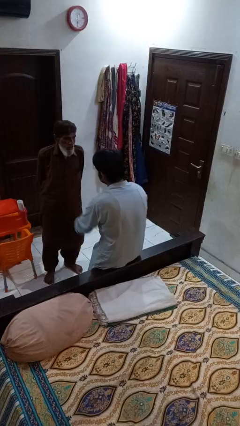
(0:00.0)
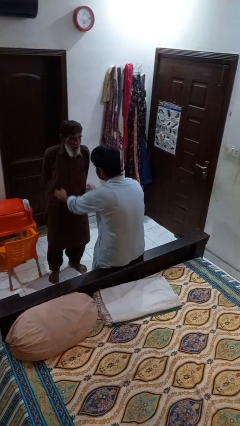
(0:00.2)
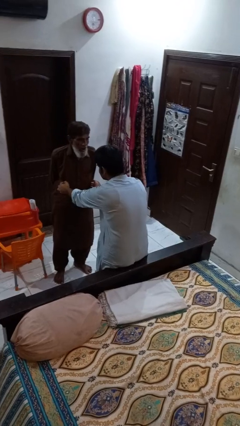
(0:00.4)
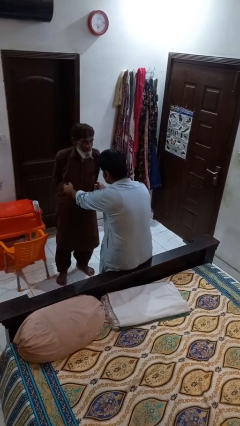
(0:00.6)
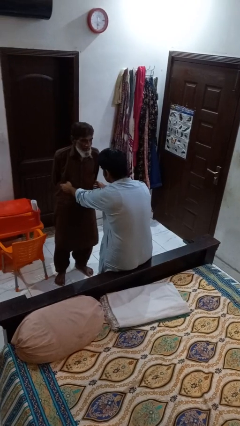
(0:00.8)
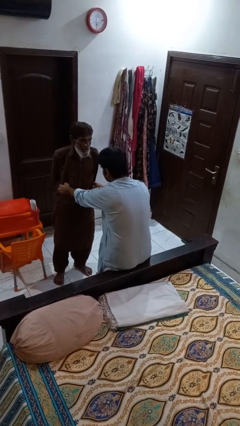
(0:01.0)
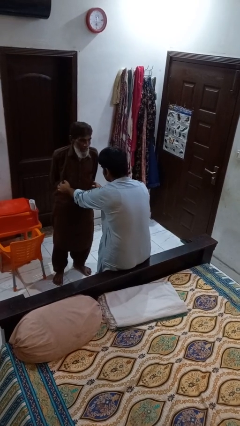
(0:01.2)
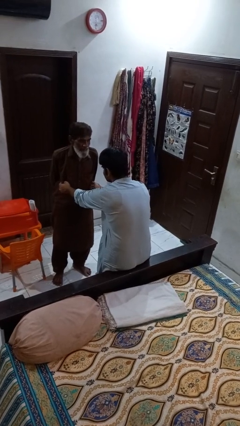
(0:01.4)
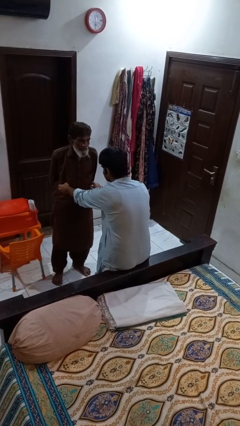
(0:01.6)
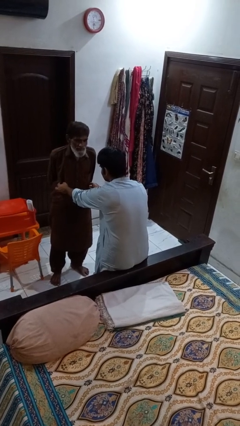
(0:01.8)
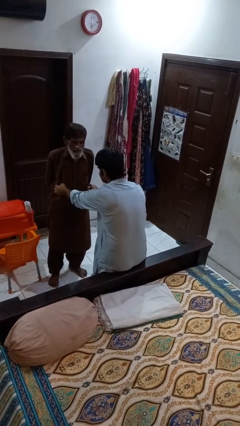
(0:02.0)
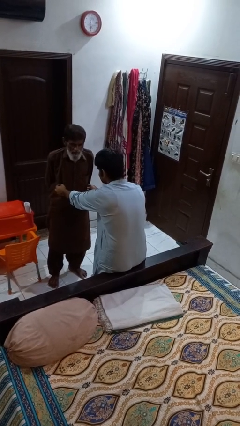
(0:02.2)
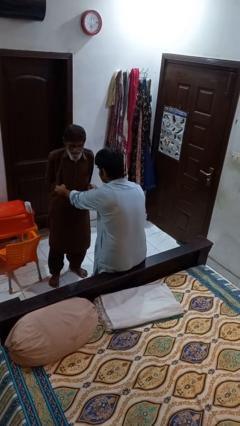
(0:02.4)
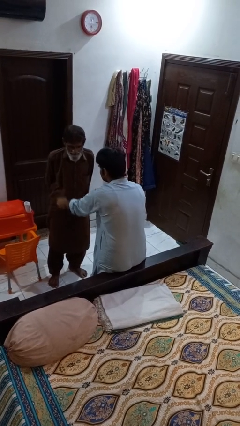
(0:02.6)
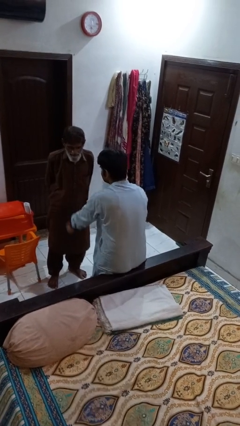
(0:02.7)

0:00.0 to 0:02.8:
person tickles person

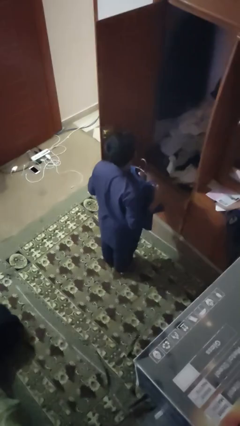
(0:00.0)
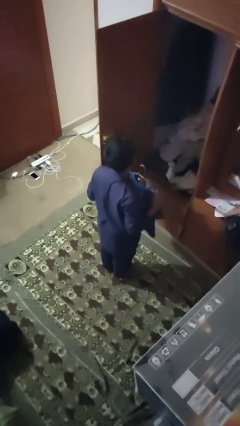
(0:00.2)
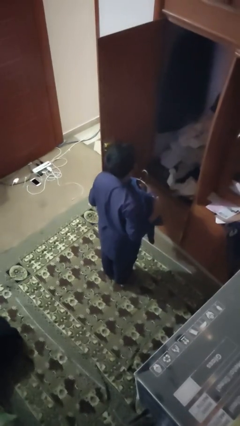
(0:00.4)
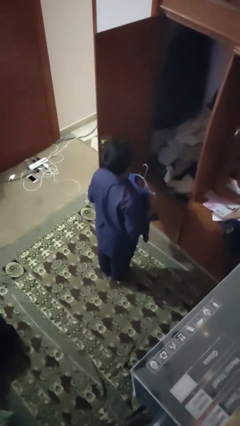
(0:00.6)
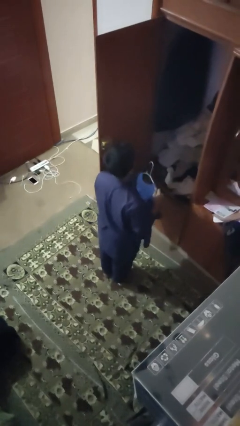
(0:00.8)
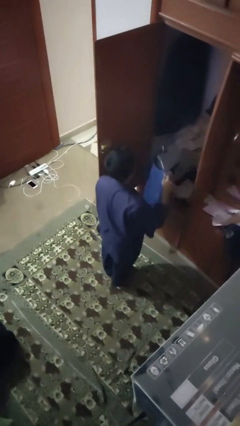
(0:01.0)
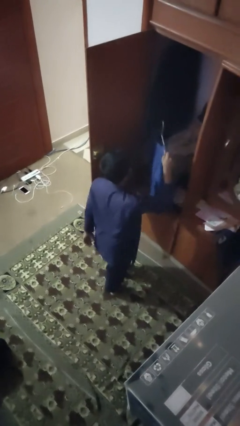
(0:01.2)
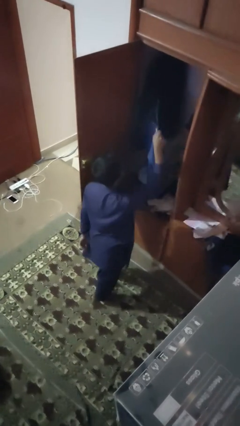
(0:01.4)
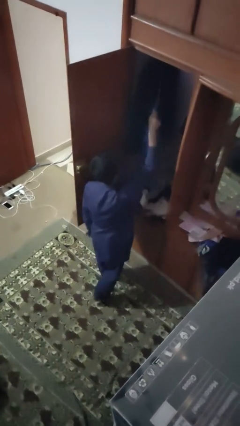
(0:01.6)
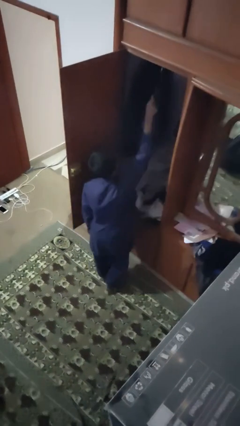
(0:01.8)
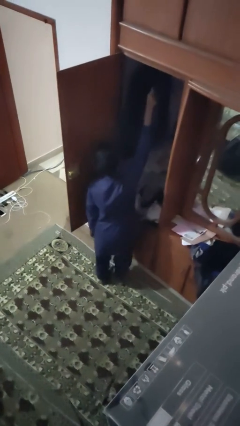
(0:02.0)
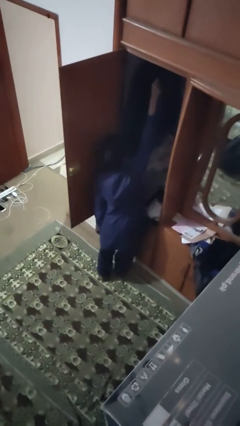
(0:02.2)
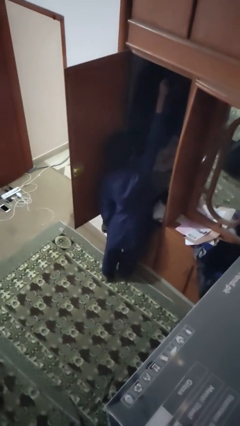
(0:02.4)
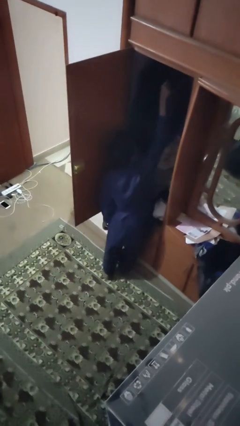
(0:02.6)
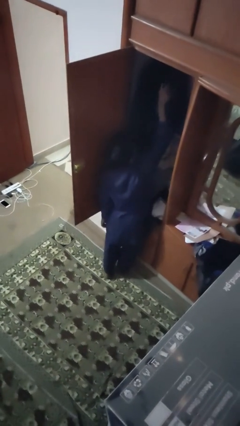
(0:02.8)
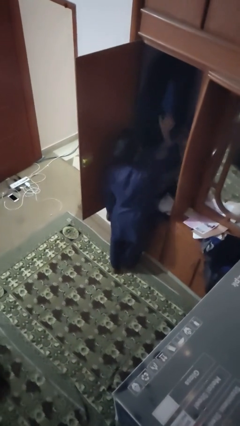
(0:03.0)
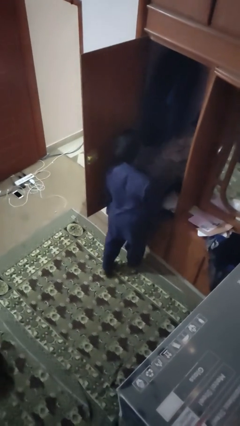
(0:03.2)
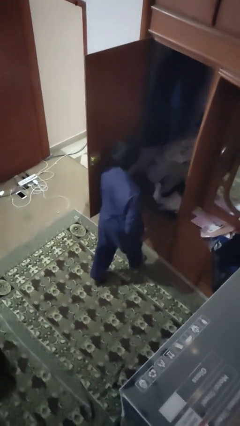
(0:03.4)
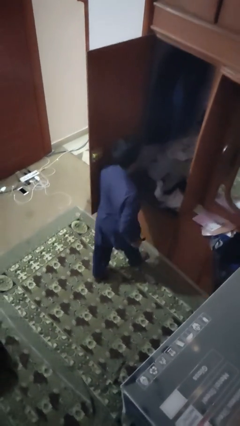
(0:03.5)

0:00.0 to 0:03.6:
person puts clothes into closet

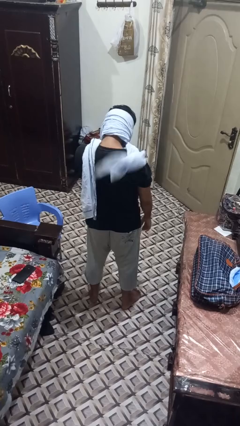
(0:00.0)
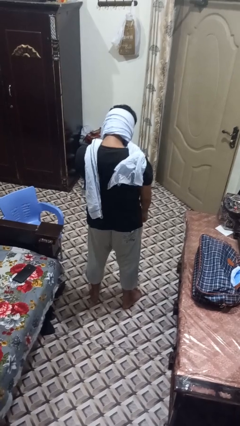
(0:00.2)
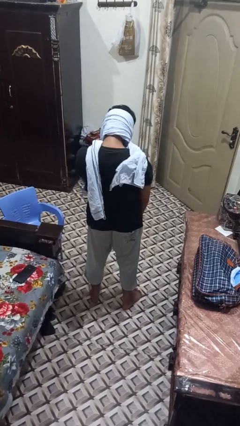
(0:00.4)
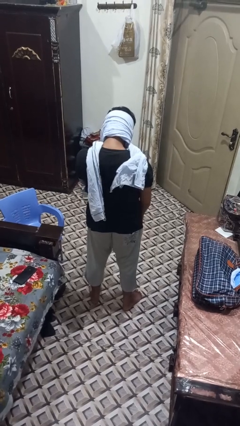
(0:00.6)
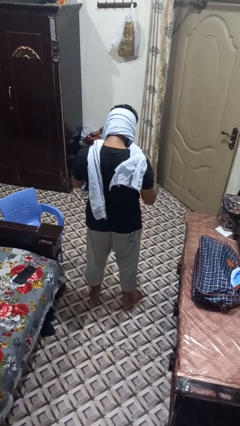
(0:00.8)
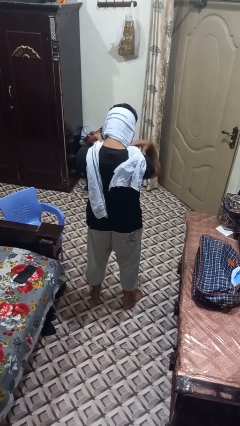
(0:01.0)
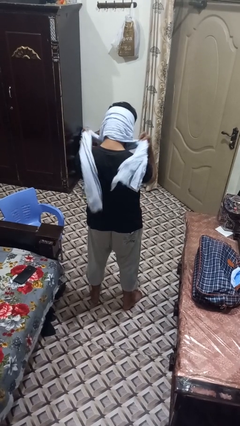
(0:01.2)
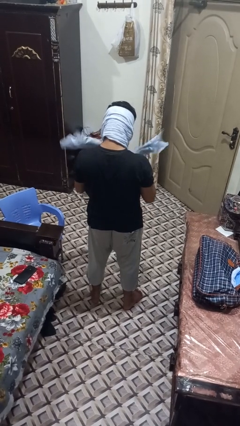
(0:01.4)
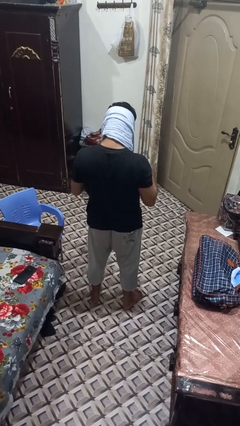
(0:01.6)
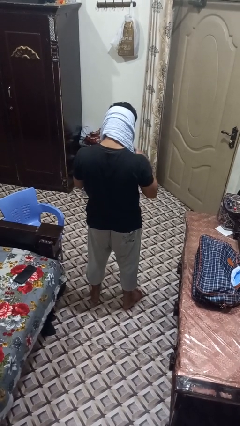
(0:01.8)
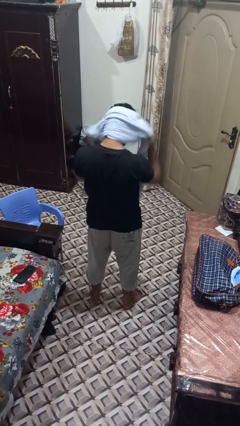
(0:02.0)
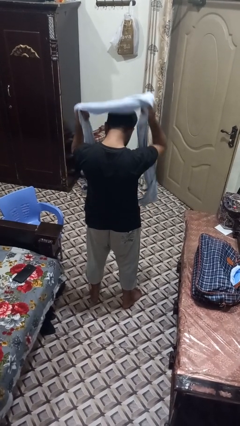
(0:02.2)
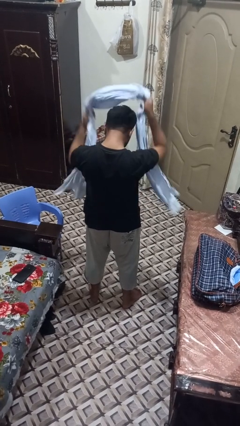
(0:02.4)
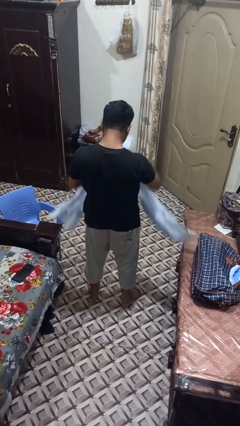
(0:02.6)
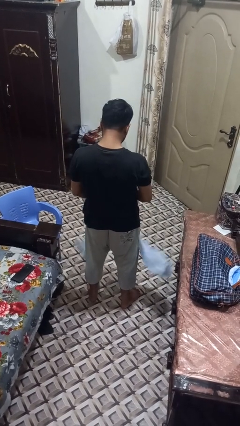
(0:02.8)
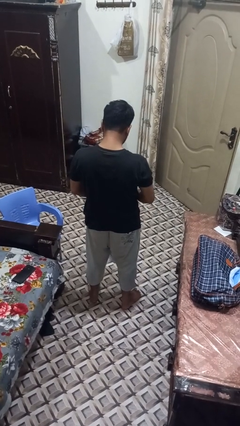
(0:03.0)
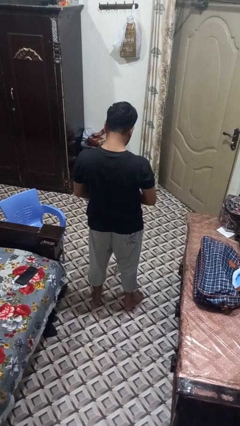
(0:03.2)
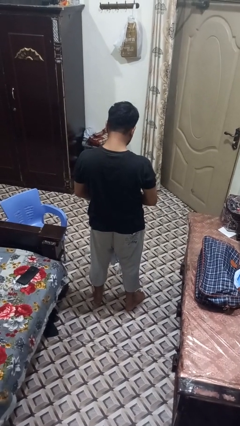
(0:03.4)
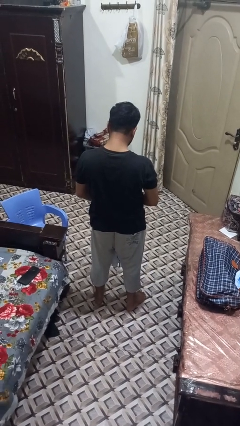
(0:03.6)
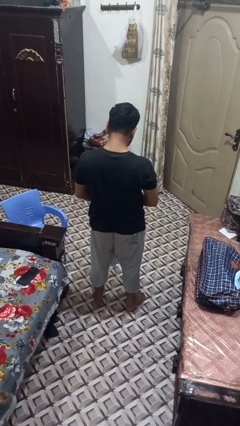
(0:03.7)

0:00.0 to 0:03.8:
person takes off scarf

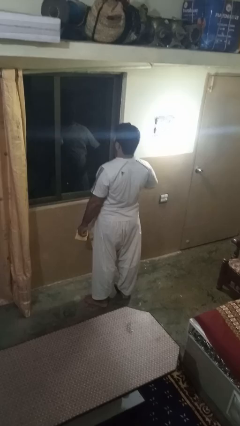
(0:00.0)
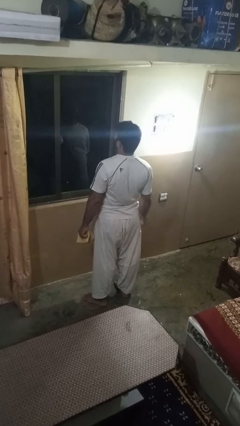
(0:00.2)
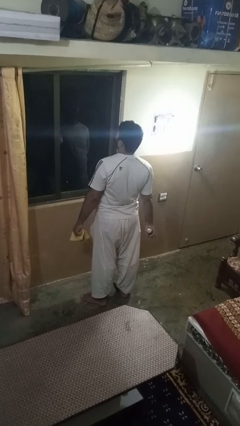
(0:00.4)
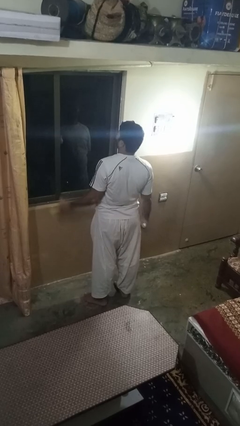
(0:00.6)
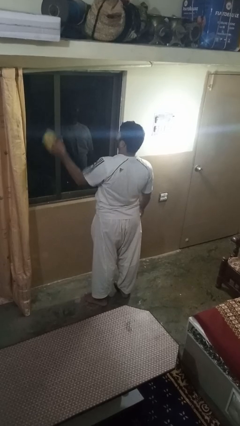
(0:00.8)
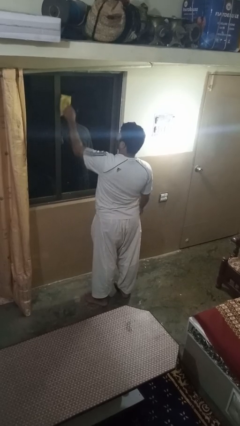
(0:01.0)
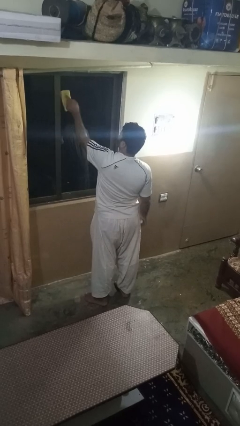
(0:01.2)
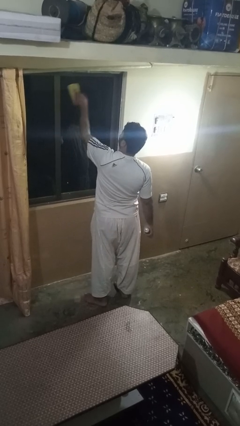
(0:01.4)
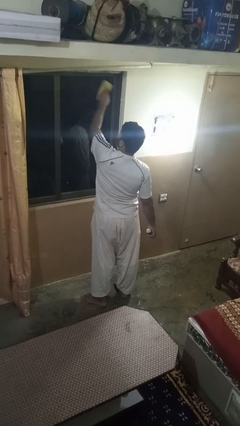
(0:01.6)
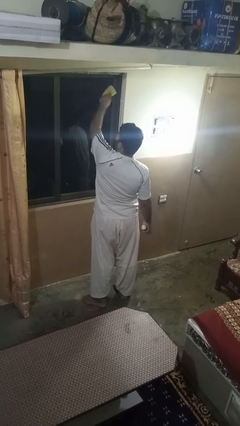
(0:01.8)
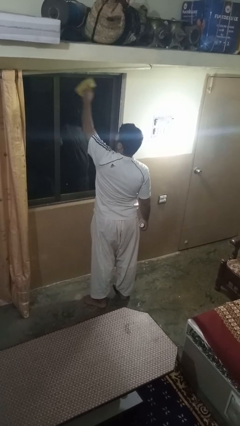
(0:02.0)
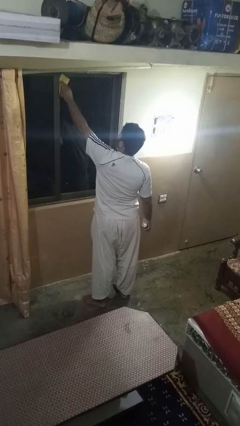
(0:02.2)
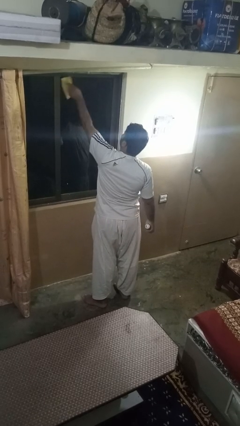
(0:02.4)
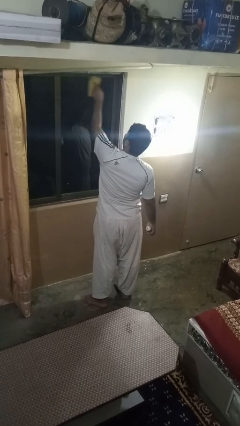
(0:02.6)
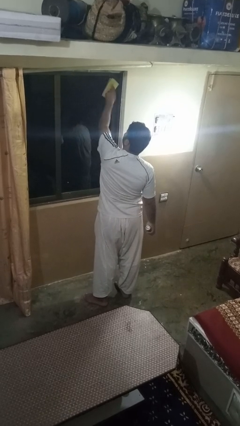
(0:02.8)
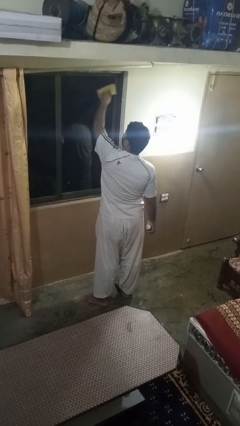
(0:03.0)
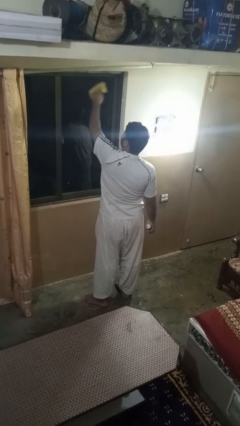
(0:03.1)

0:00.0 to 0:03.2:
person washes window

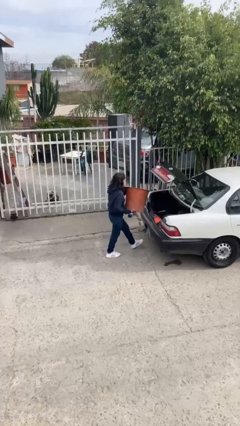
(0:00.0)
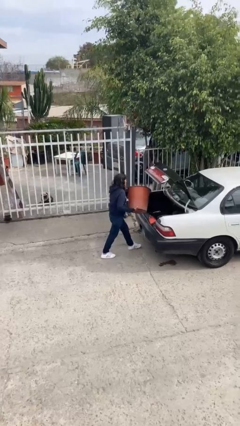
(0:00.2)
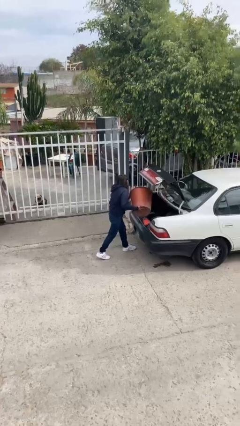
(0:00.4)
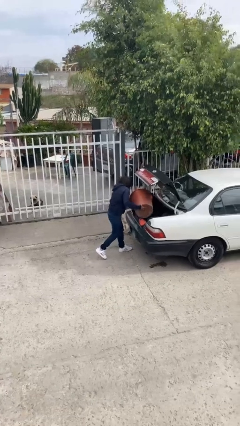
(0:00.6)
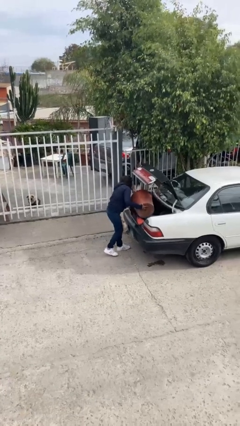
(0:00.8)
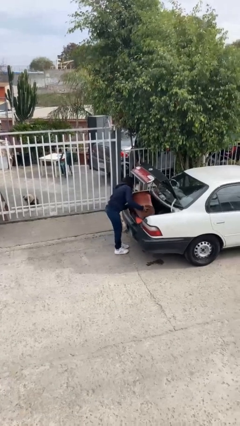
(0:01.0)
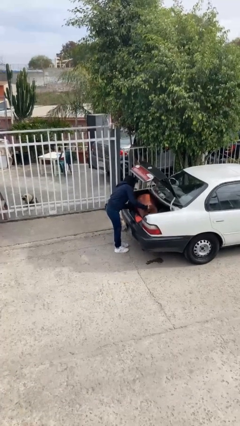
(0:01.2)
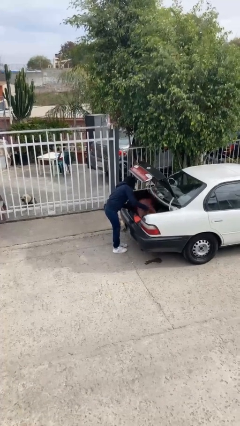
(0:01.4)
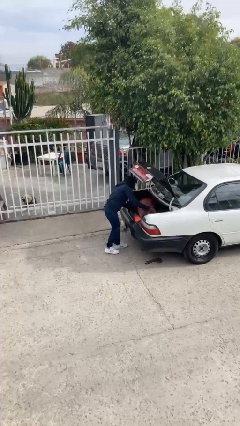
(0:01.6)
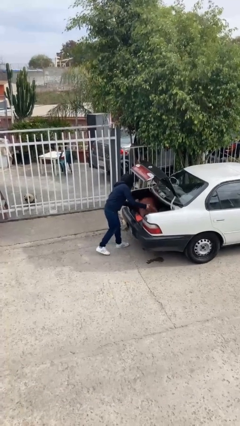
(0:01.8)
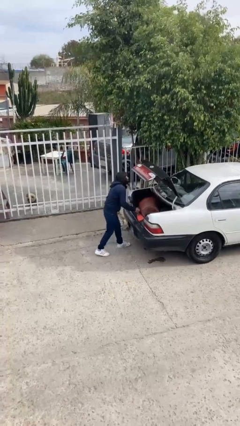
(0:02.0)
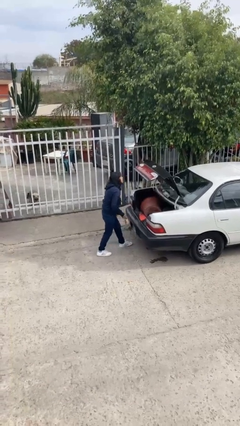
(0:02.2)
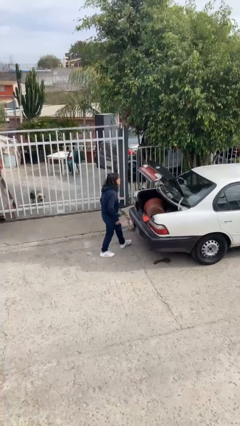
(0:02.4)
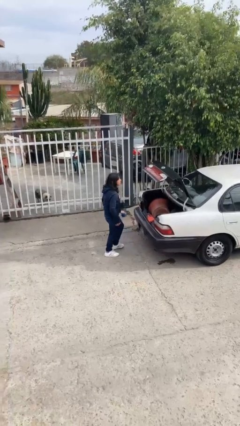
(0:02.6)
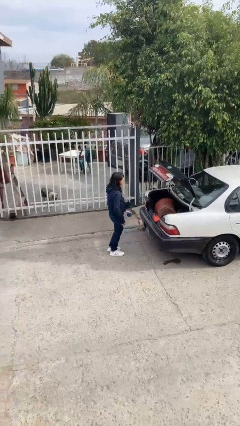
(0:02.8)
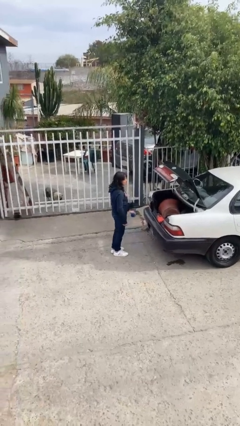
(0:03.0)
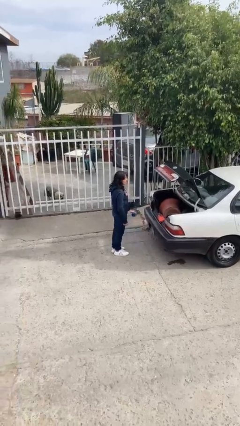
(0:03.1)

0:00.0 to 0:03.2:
person loads car

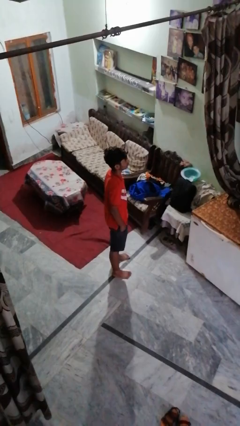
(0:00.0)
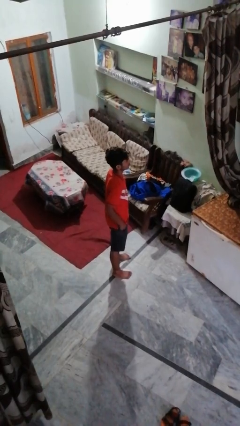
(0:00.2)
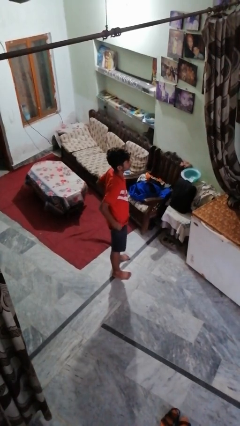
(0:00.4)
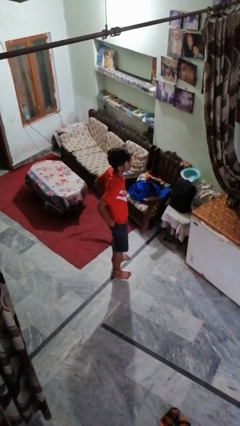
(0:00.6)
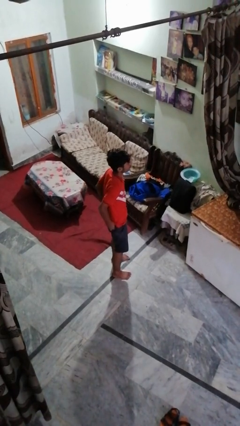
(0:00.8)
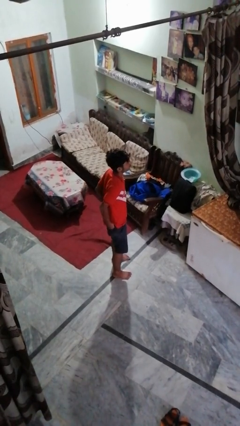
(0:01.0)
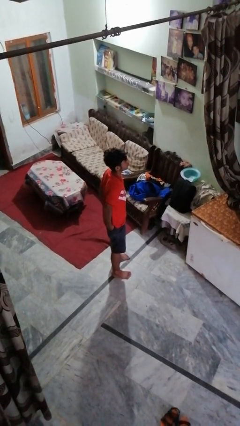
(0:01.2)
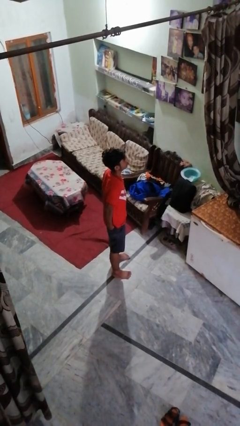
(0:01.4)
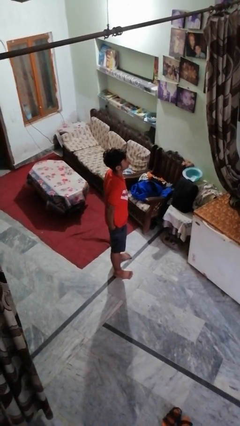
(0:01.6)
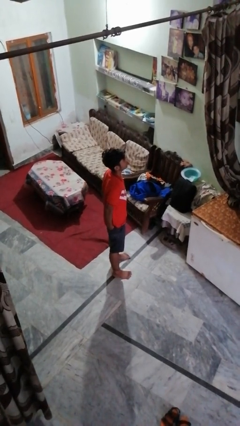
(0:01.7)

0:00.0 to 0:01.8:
person puts hands in back pockets
